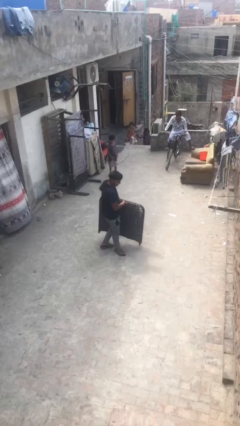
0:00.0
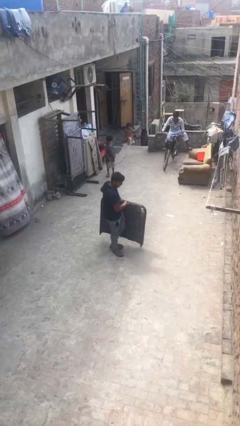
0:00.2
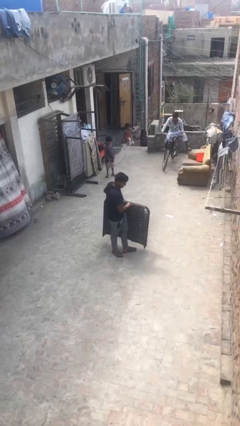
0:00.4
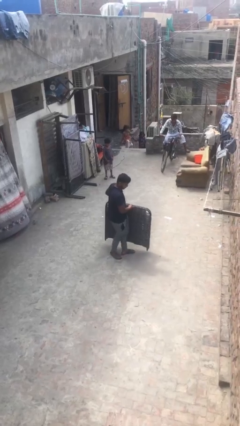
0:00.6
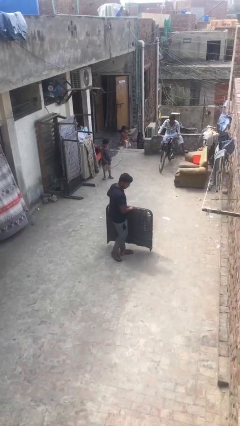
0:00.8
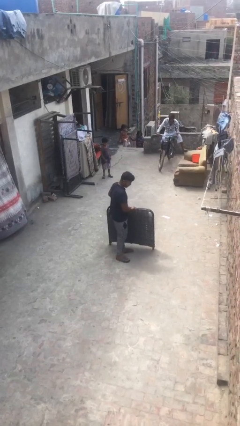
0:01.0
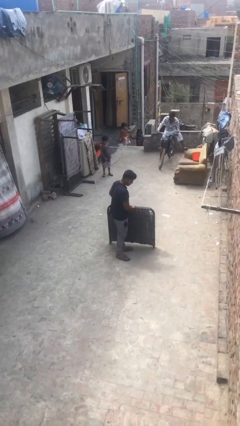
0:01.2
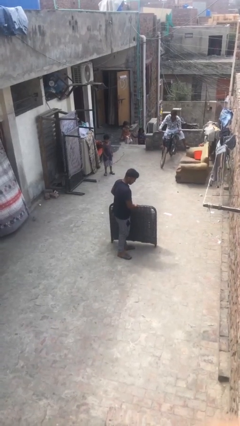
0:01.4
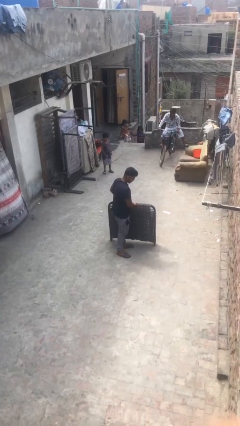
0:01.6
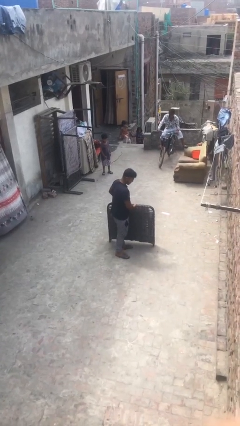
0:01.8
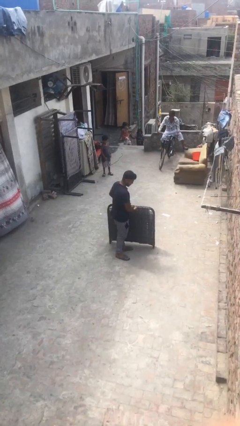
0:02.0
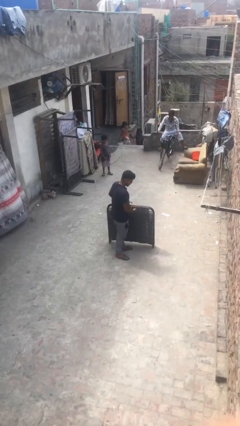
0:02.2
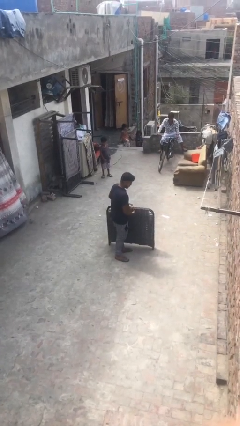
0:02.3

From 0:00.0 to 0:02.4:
person puts down object on floor

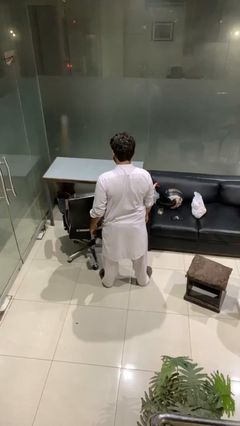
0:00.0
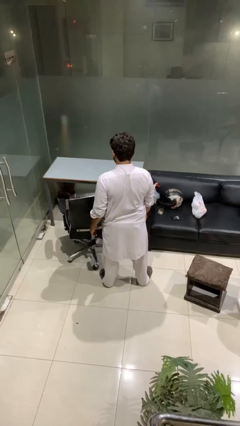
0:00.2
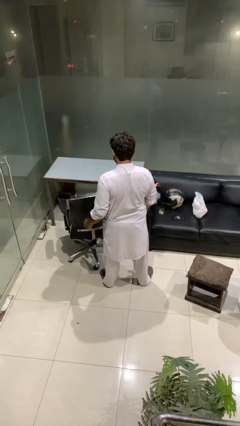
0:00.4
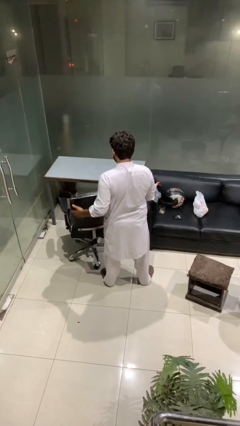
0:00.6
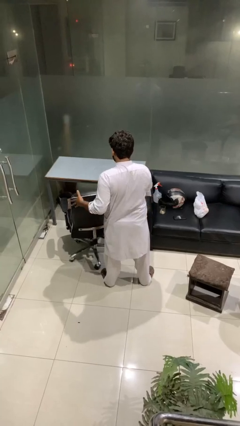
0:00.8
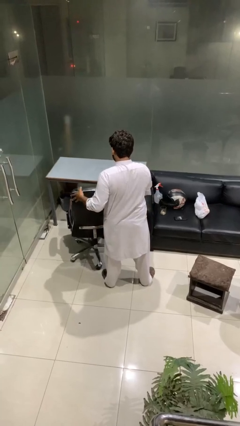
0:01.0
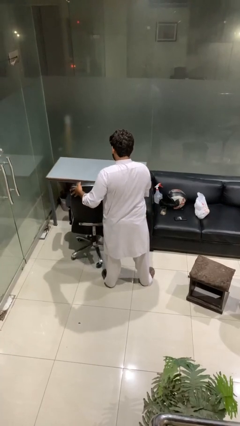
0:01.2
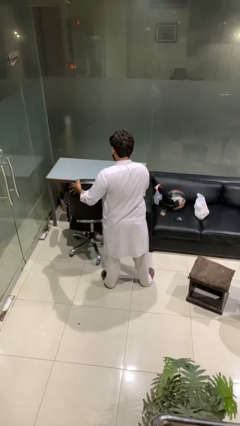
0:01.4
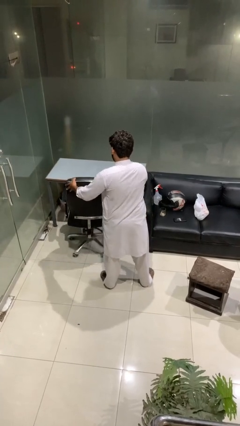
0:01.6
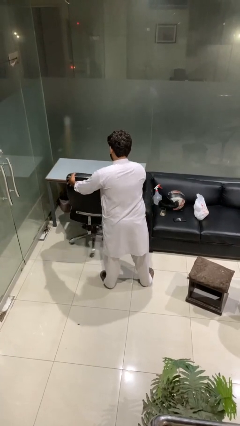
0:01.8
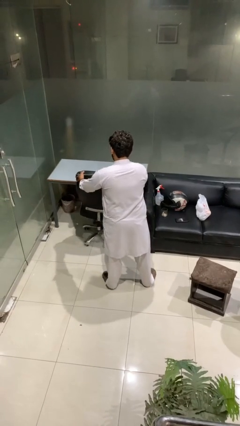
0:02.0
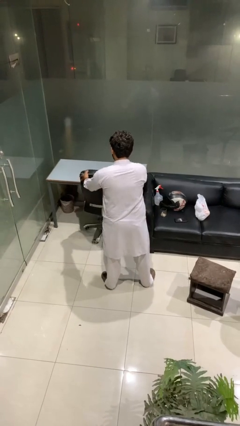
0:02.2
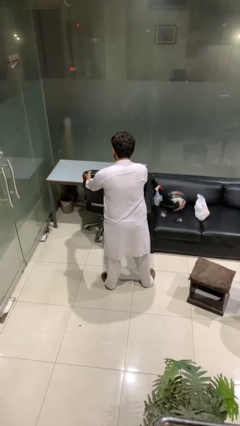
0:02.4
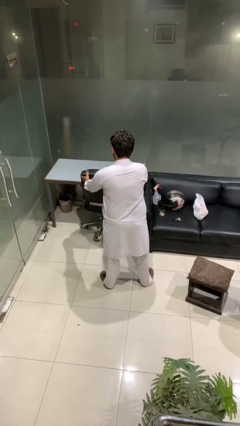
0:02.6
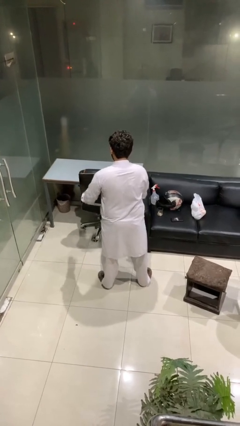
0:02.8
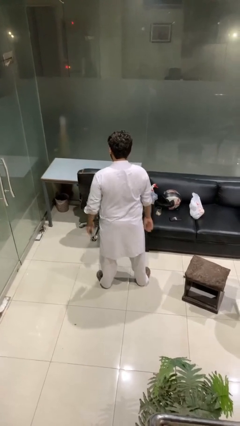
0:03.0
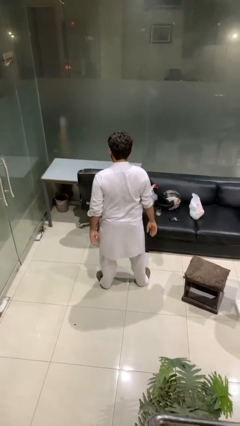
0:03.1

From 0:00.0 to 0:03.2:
person pushes in chair

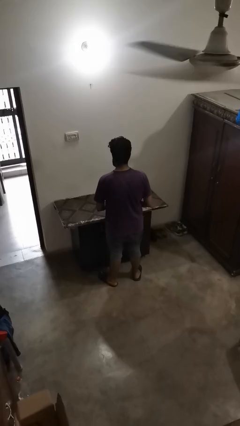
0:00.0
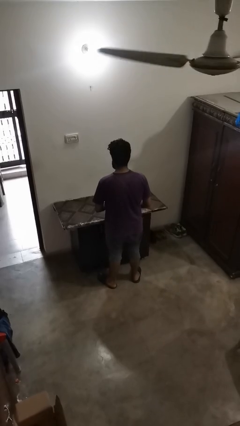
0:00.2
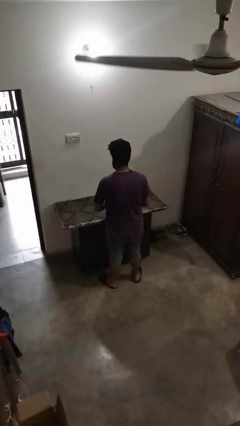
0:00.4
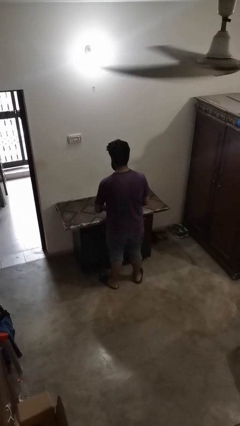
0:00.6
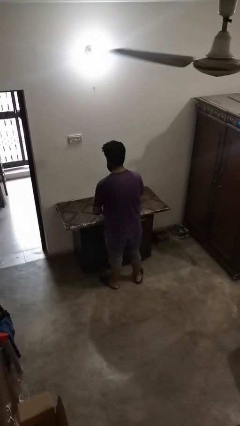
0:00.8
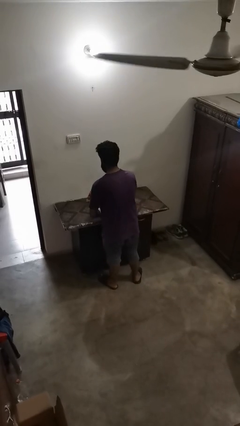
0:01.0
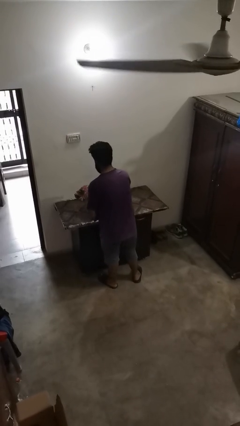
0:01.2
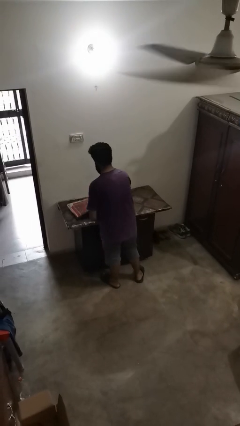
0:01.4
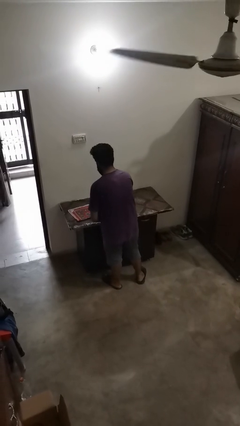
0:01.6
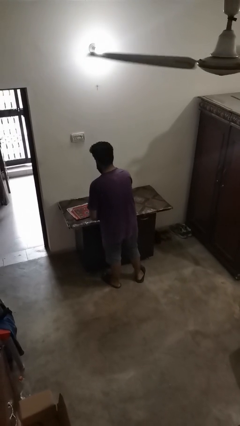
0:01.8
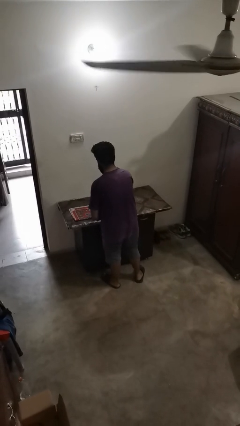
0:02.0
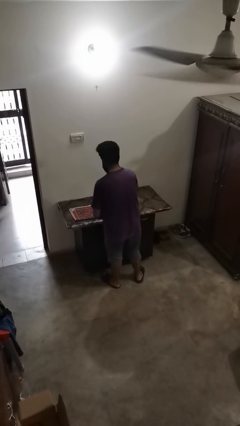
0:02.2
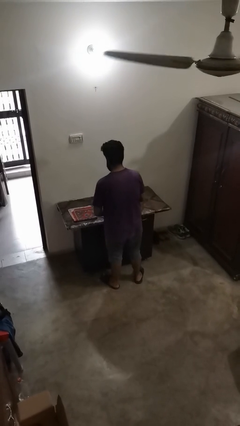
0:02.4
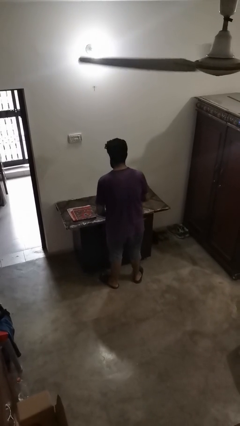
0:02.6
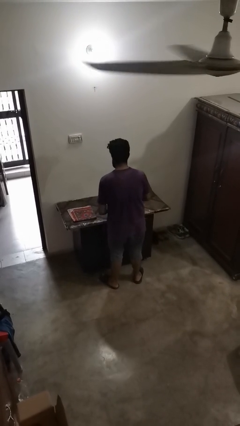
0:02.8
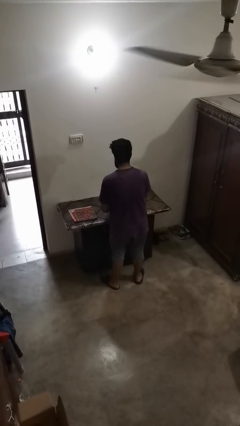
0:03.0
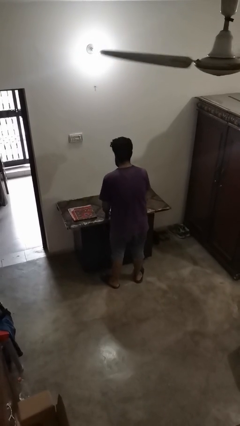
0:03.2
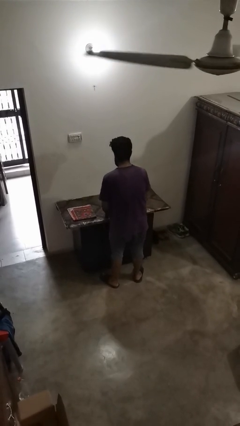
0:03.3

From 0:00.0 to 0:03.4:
person spreads tablecloth

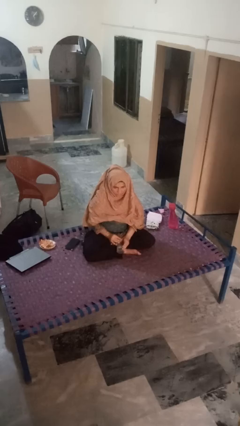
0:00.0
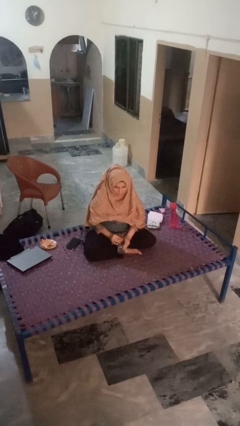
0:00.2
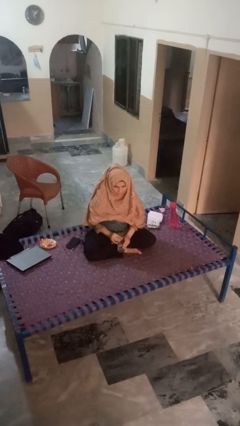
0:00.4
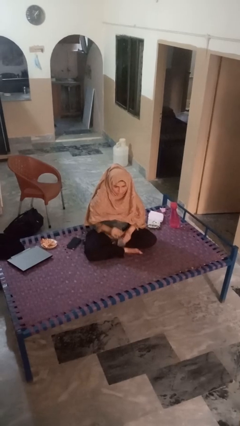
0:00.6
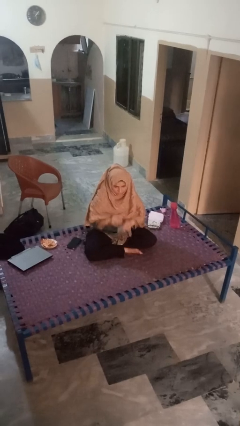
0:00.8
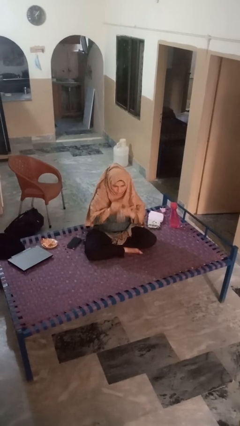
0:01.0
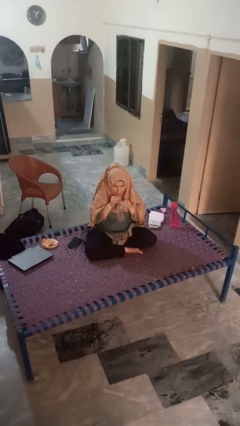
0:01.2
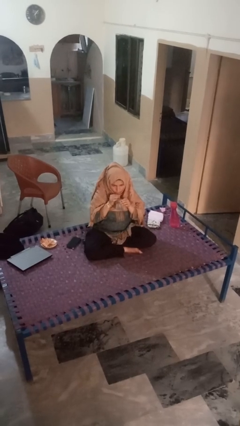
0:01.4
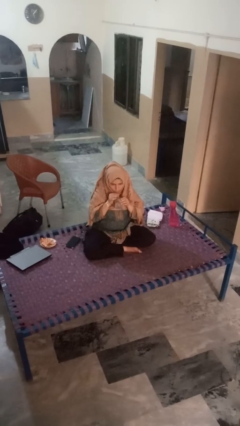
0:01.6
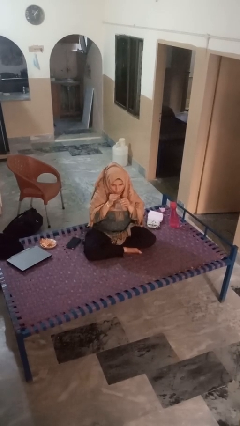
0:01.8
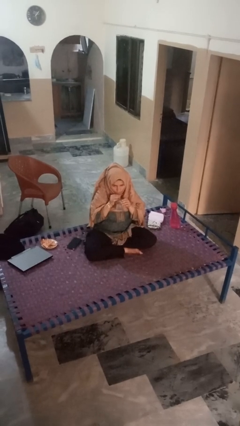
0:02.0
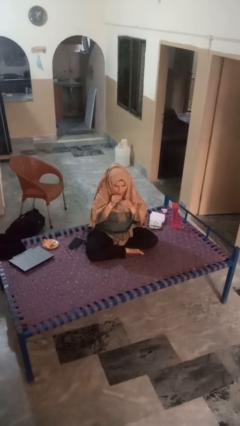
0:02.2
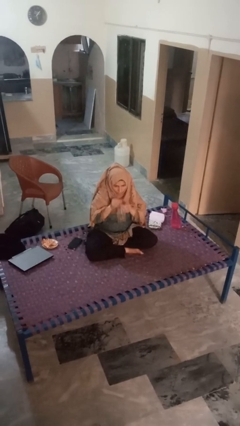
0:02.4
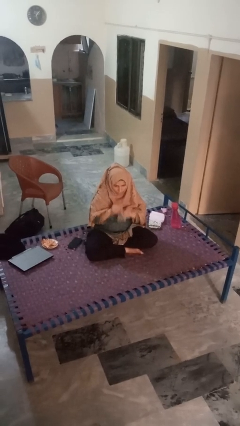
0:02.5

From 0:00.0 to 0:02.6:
person drinks from straw

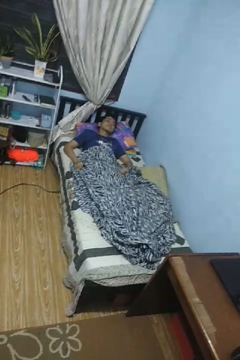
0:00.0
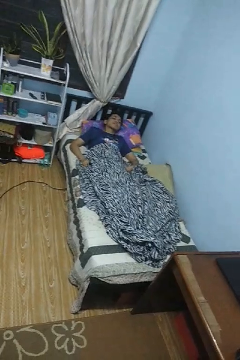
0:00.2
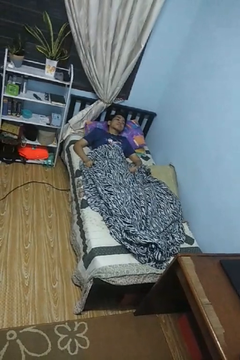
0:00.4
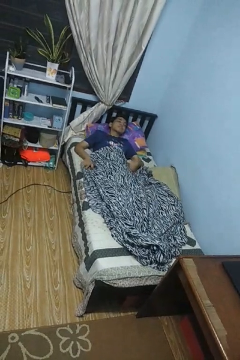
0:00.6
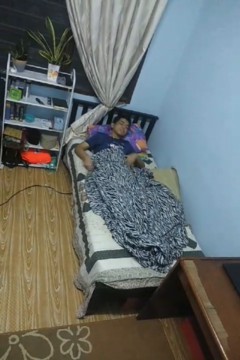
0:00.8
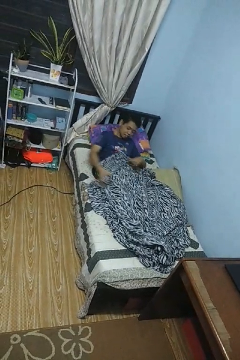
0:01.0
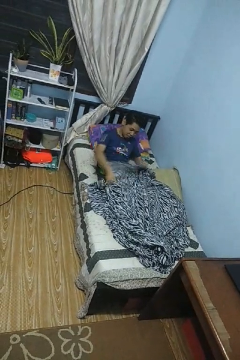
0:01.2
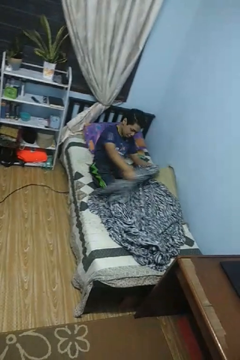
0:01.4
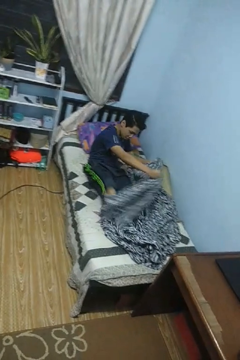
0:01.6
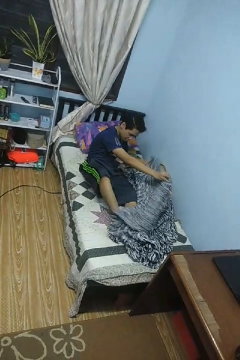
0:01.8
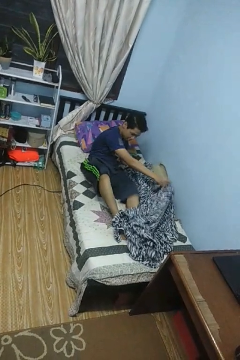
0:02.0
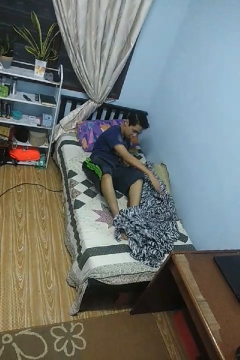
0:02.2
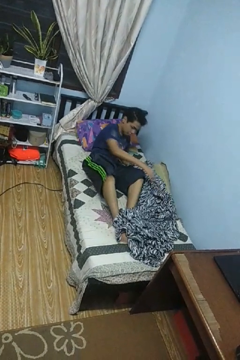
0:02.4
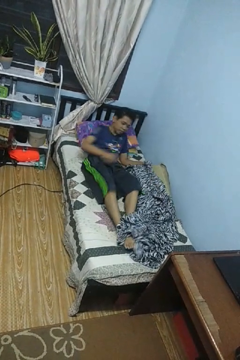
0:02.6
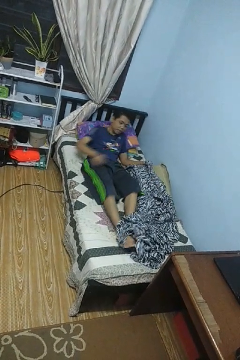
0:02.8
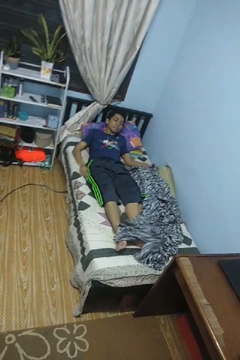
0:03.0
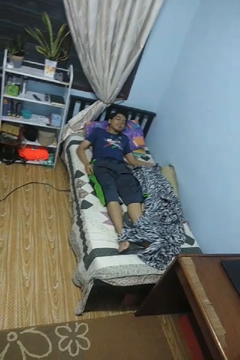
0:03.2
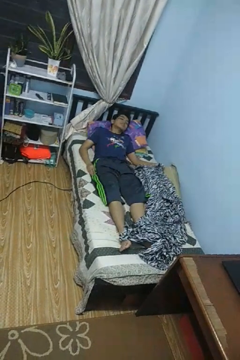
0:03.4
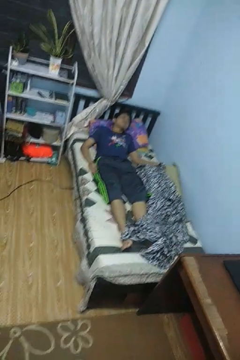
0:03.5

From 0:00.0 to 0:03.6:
person uncovers with blanket

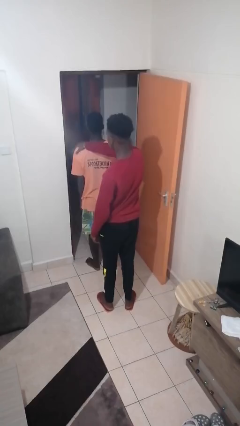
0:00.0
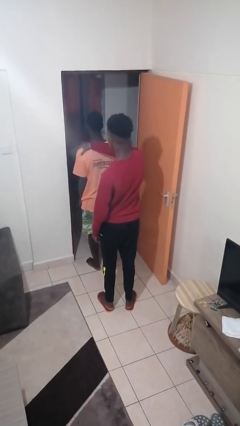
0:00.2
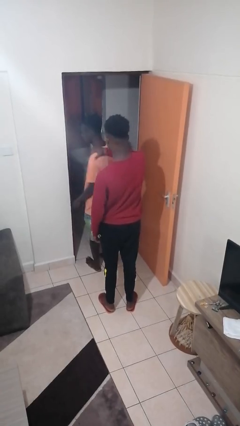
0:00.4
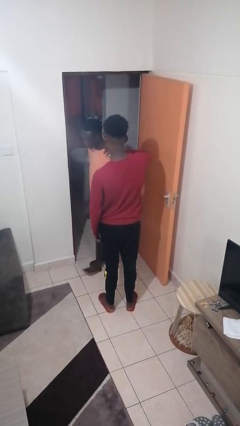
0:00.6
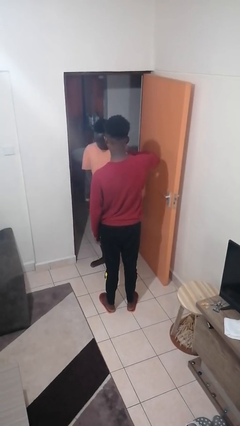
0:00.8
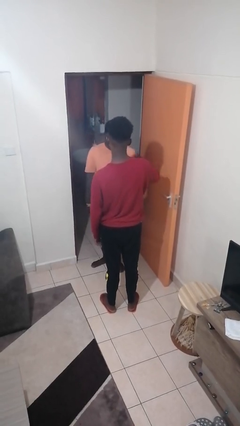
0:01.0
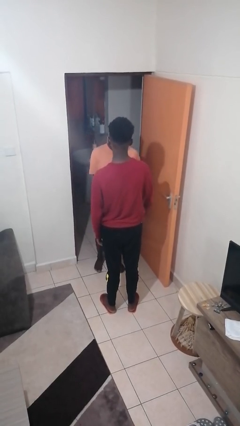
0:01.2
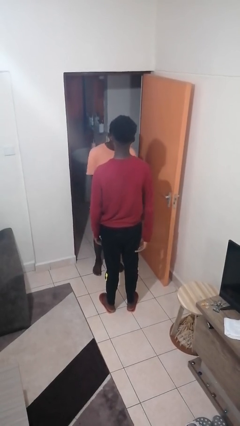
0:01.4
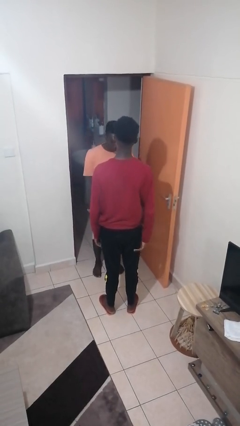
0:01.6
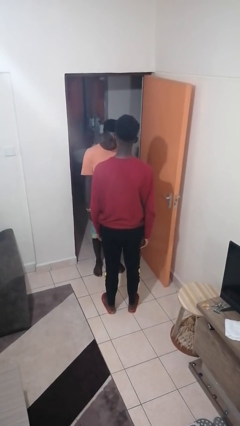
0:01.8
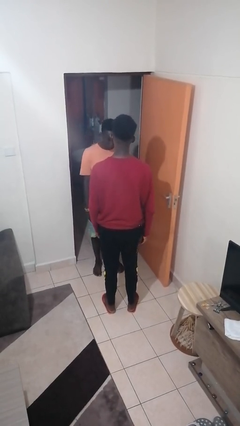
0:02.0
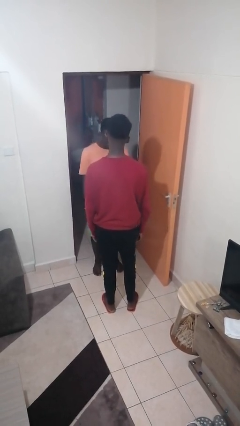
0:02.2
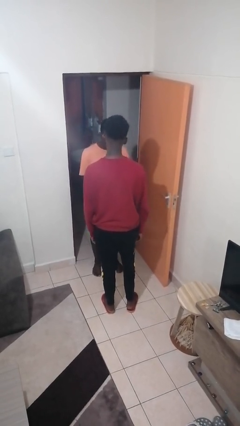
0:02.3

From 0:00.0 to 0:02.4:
person spins person around

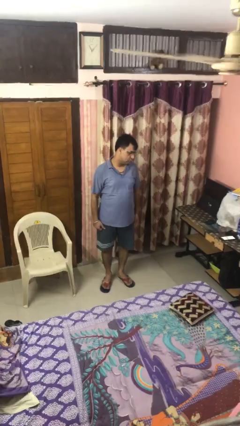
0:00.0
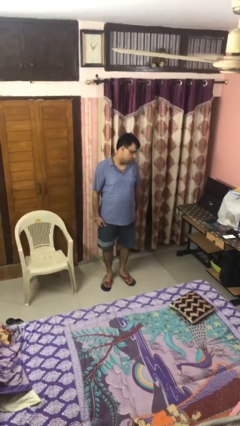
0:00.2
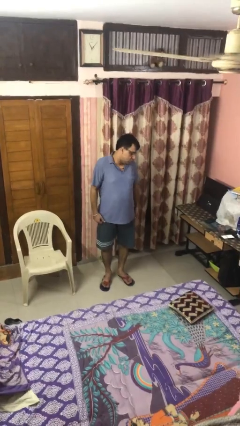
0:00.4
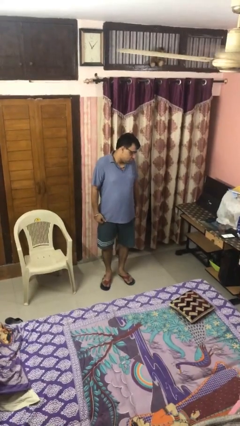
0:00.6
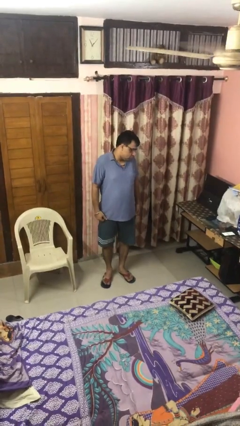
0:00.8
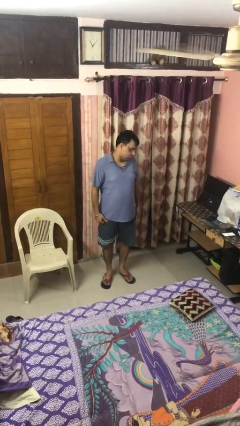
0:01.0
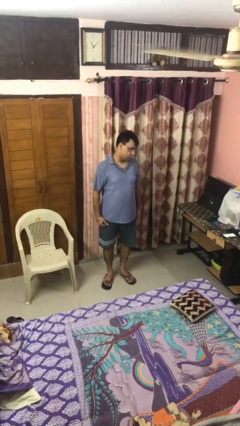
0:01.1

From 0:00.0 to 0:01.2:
person shrugs
